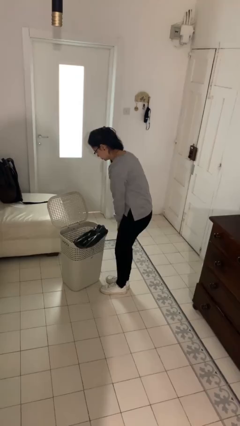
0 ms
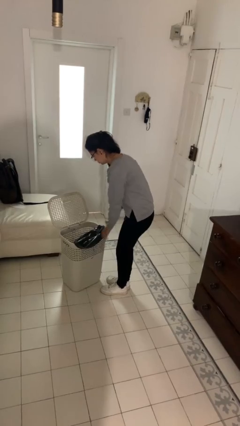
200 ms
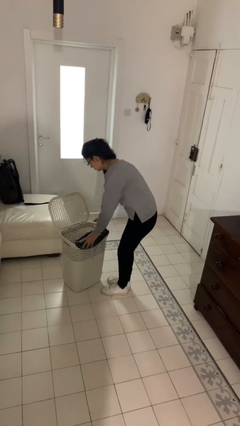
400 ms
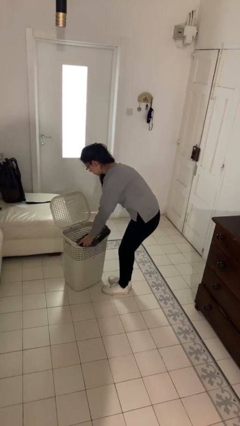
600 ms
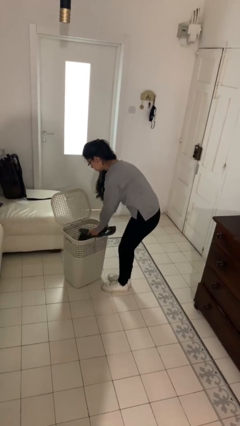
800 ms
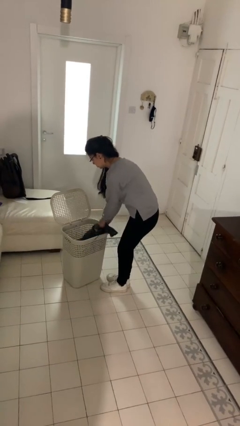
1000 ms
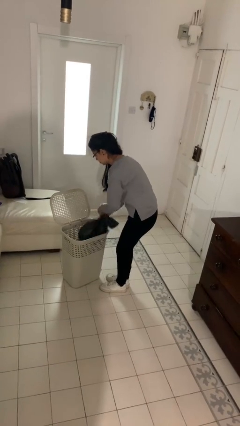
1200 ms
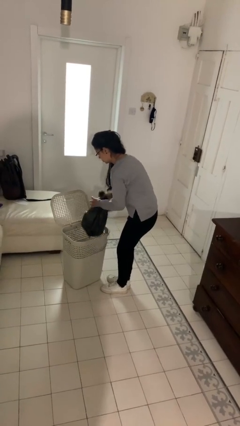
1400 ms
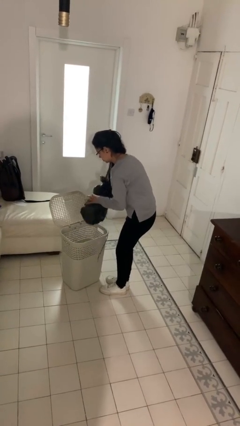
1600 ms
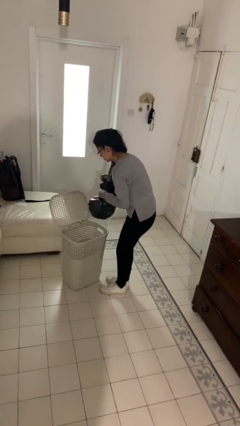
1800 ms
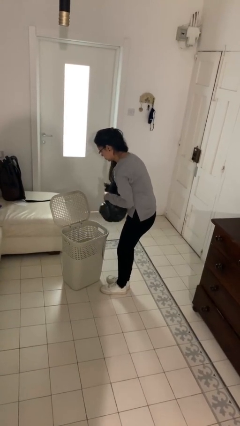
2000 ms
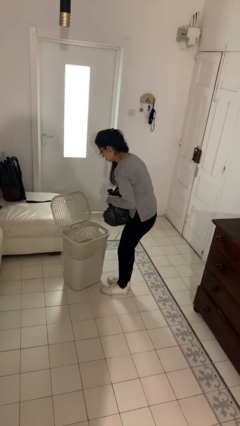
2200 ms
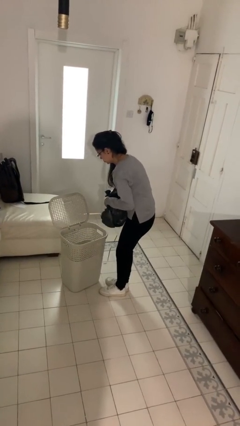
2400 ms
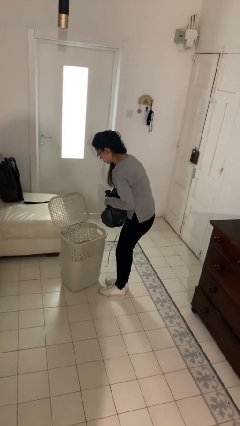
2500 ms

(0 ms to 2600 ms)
person removes trashbag from trashcan

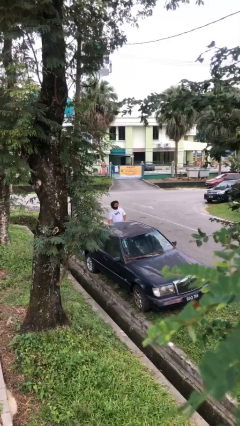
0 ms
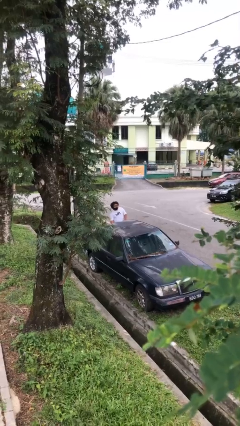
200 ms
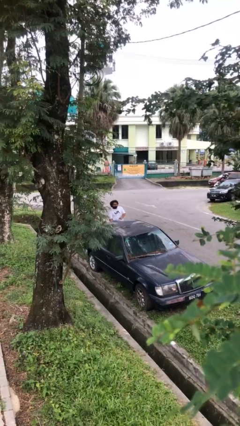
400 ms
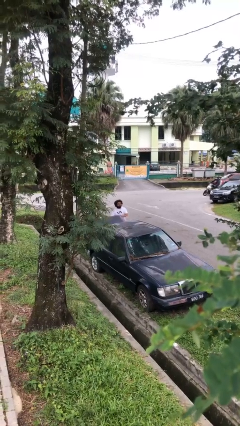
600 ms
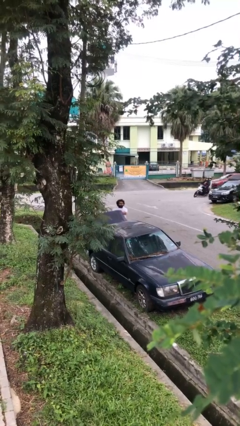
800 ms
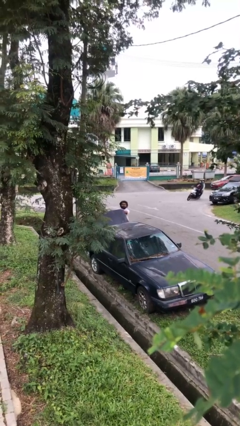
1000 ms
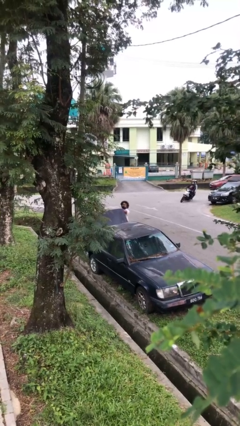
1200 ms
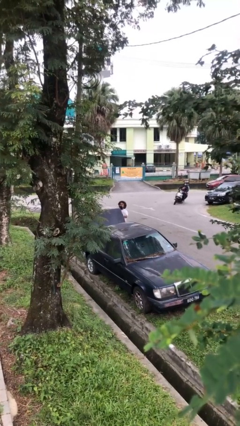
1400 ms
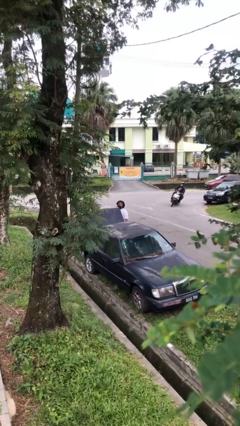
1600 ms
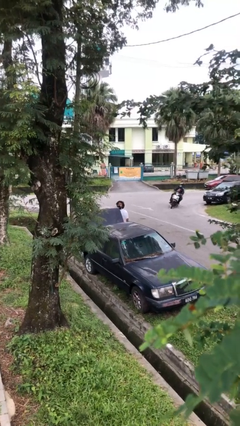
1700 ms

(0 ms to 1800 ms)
person opens car trunk

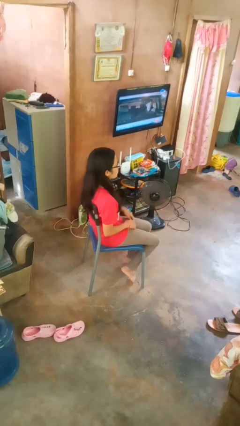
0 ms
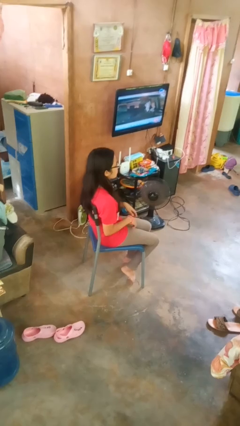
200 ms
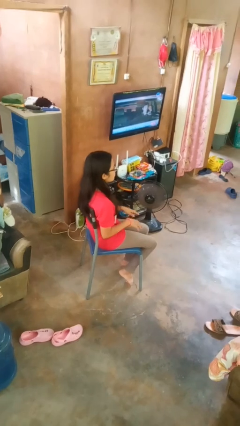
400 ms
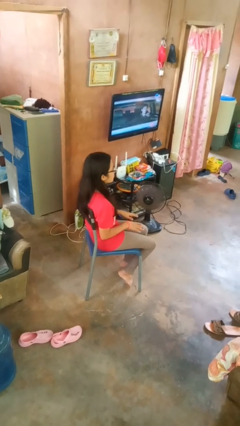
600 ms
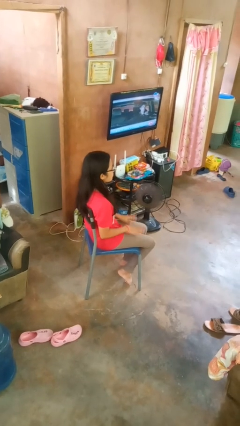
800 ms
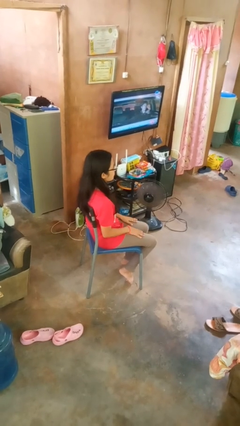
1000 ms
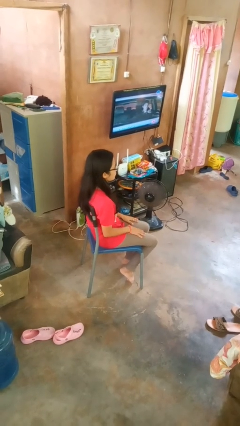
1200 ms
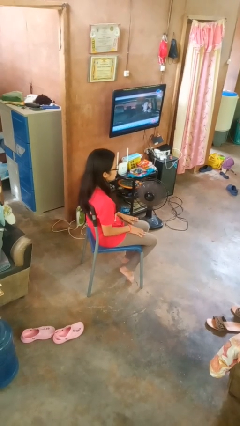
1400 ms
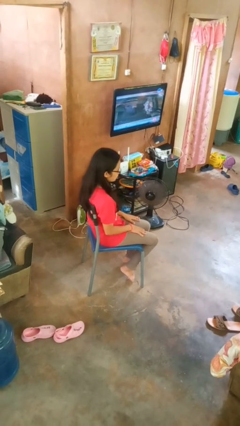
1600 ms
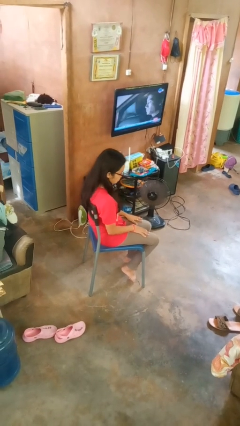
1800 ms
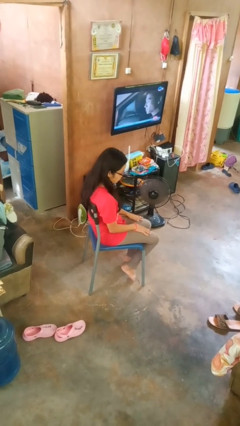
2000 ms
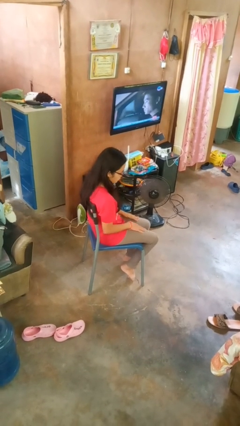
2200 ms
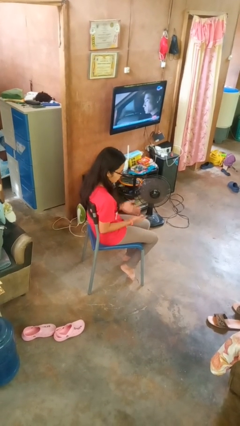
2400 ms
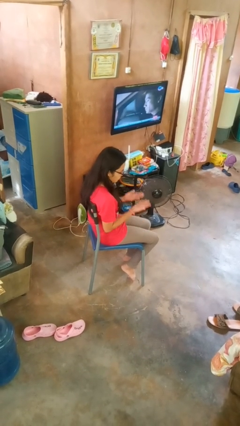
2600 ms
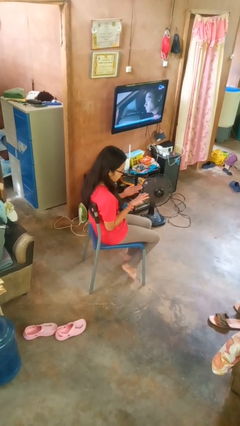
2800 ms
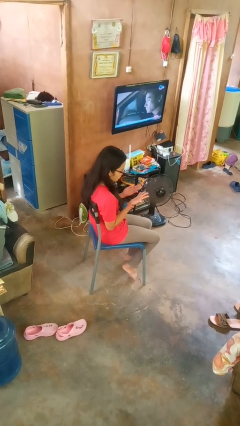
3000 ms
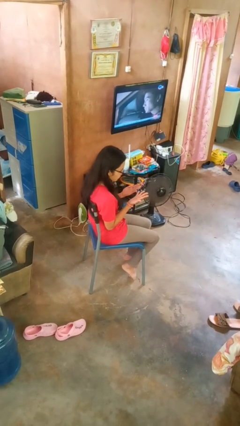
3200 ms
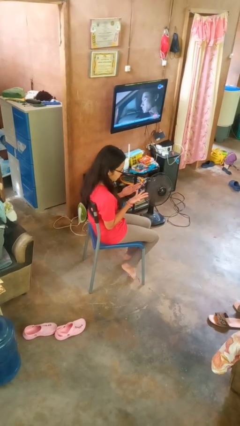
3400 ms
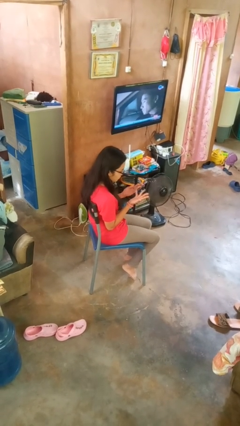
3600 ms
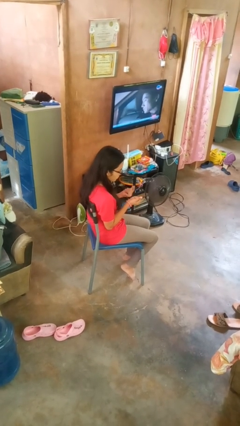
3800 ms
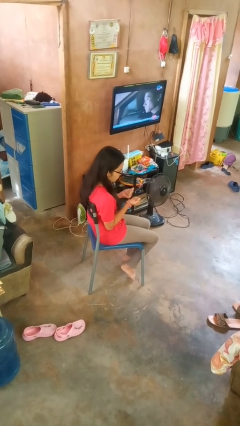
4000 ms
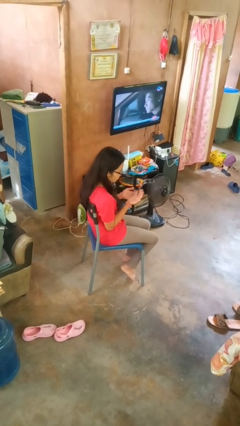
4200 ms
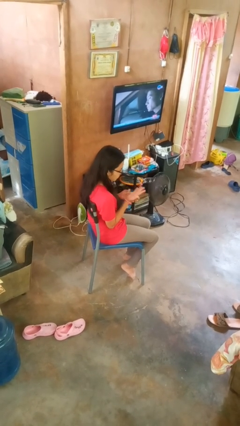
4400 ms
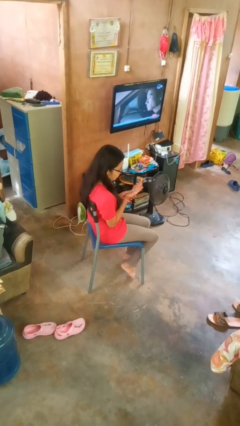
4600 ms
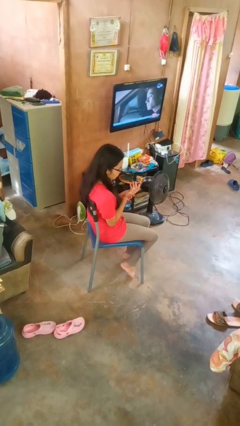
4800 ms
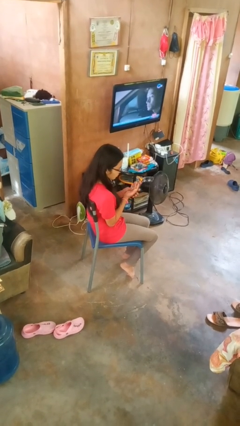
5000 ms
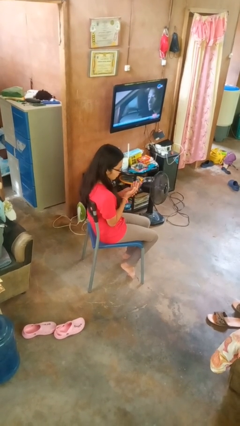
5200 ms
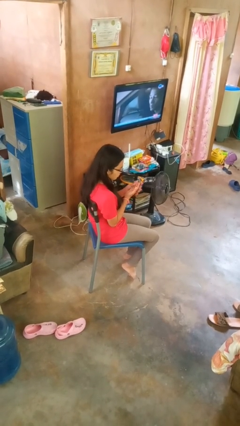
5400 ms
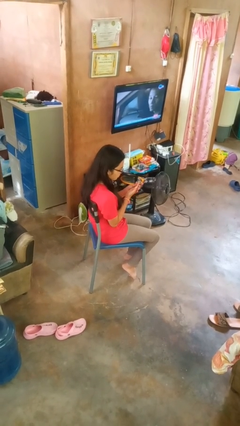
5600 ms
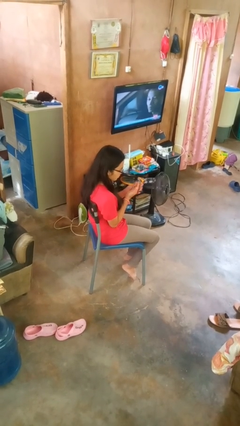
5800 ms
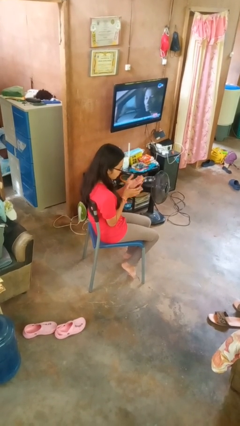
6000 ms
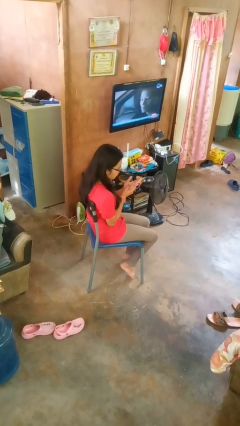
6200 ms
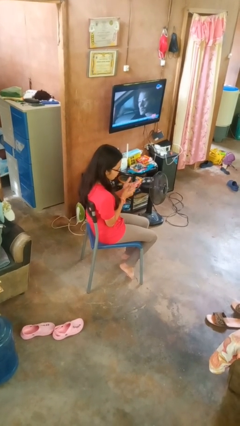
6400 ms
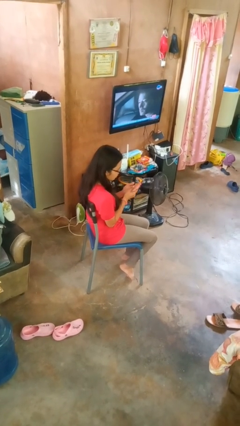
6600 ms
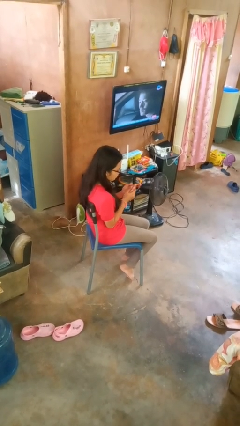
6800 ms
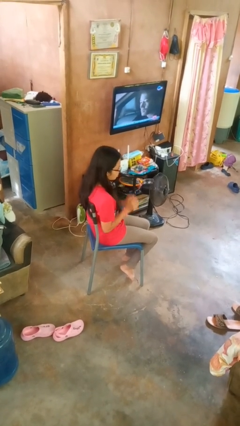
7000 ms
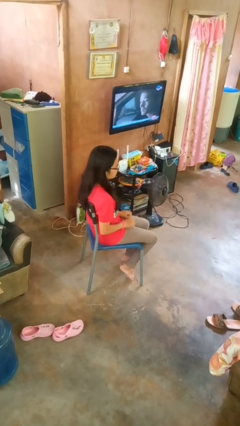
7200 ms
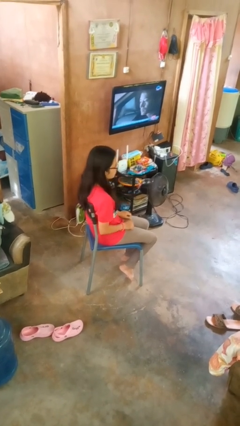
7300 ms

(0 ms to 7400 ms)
person looks at hands in lap

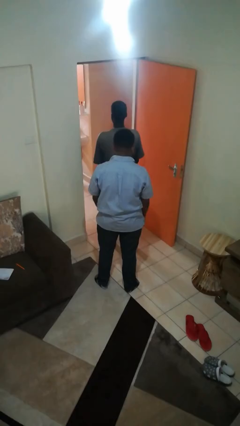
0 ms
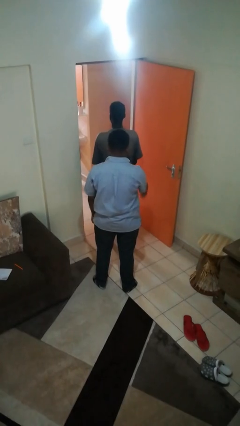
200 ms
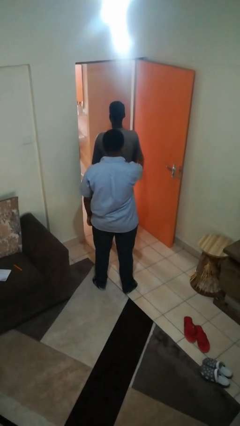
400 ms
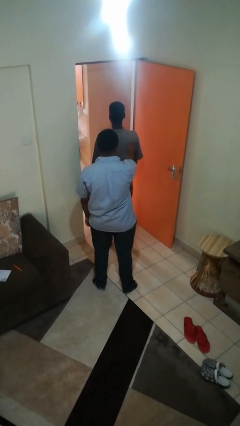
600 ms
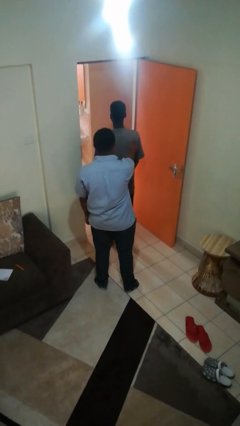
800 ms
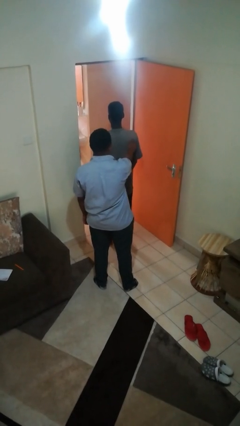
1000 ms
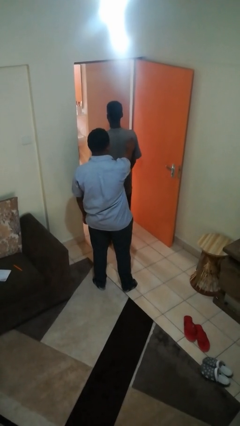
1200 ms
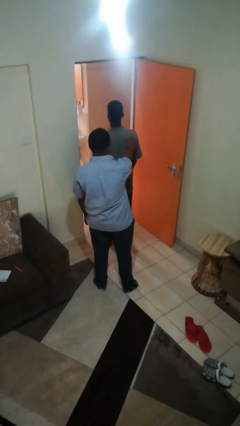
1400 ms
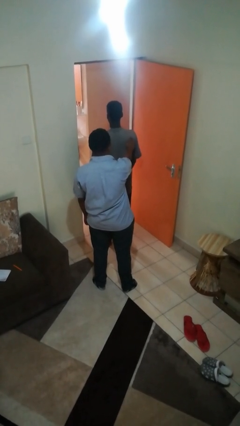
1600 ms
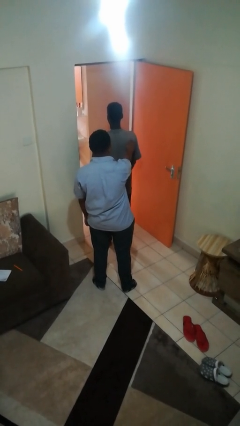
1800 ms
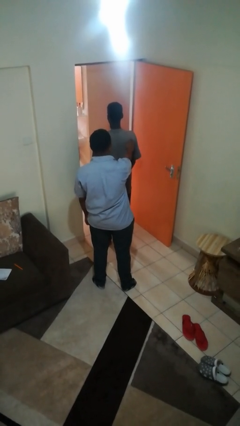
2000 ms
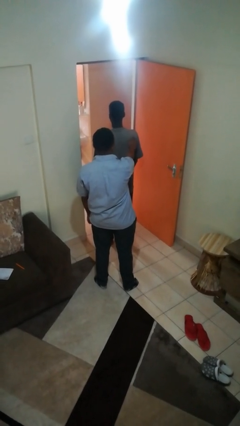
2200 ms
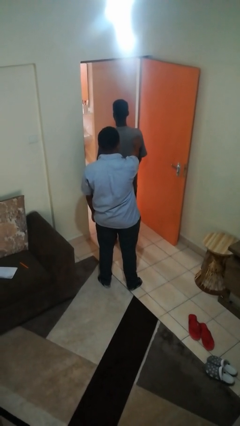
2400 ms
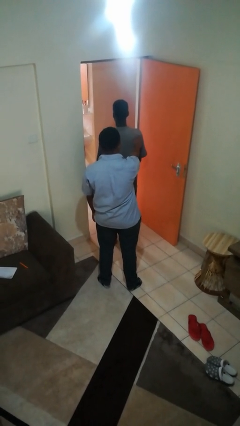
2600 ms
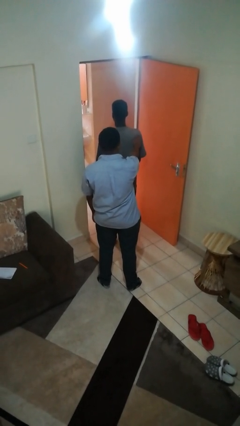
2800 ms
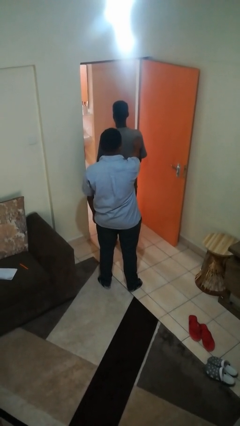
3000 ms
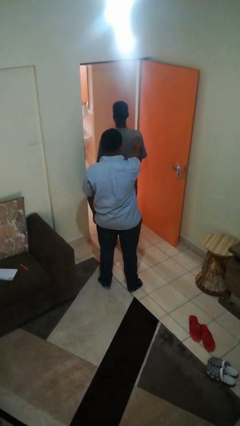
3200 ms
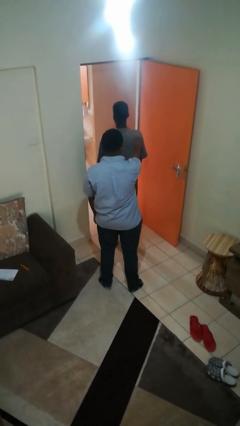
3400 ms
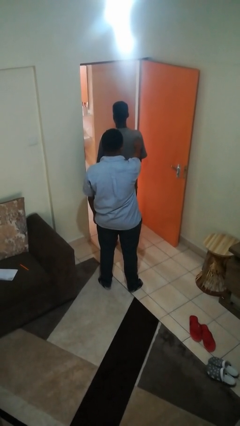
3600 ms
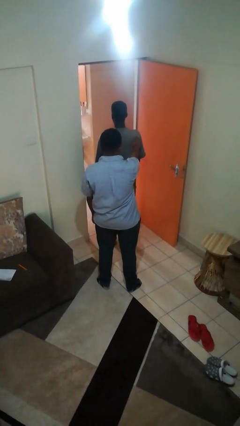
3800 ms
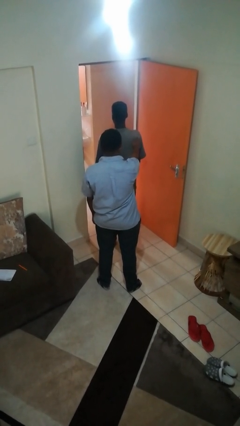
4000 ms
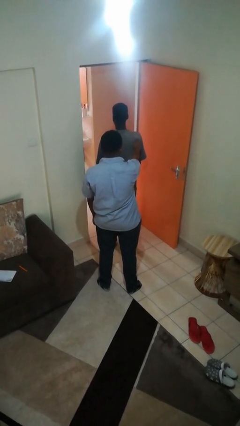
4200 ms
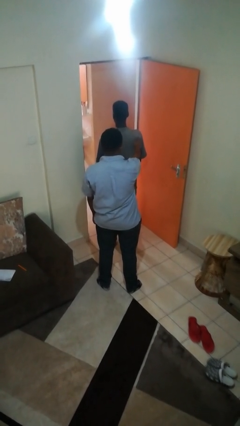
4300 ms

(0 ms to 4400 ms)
person touches back of person

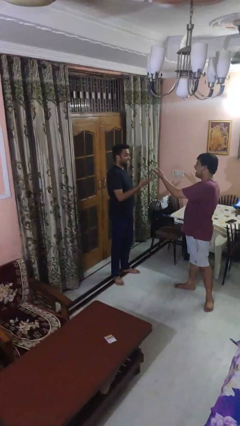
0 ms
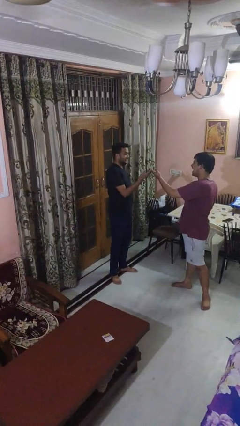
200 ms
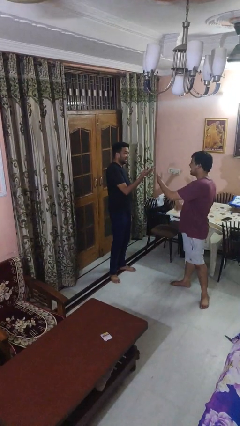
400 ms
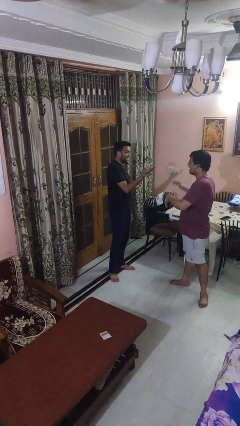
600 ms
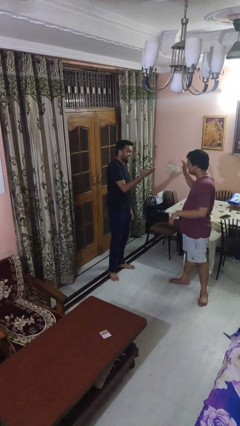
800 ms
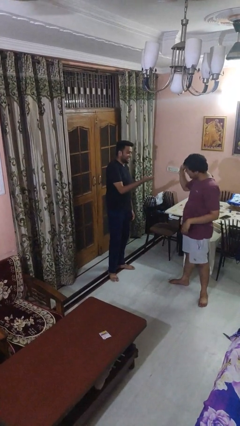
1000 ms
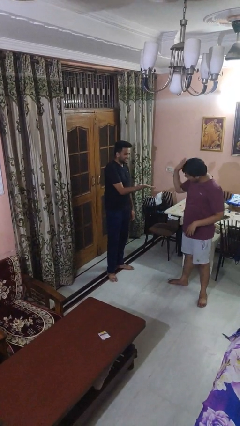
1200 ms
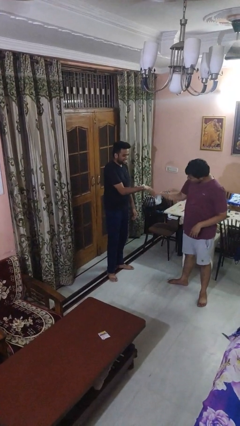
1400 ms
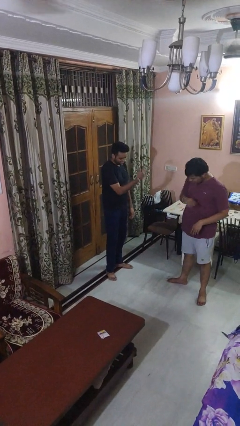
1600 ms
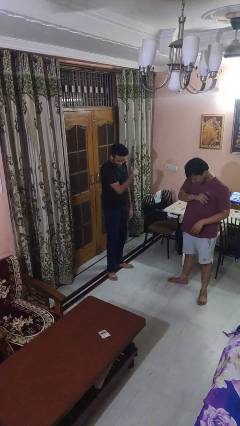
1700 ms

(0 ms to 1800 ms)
person laughs with person
